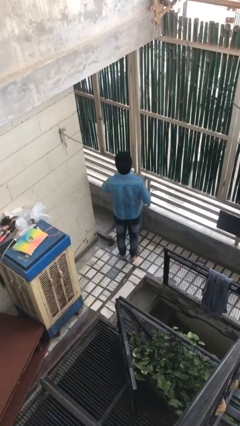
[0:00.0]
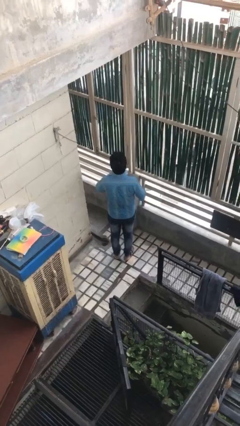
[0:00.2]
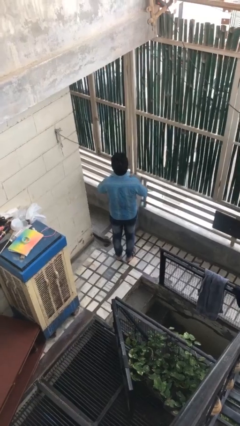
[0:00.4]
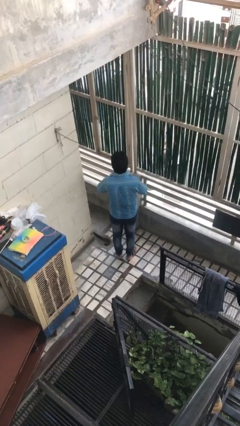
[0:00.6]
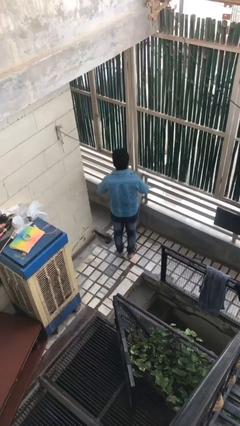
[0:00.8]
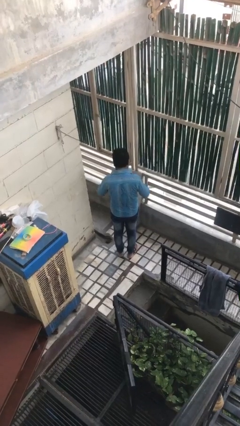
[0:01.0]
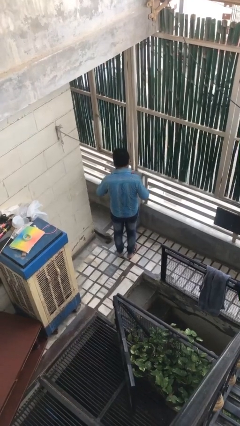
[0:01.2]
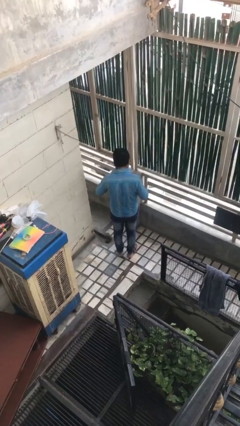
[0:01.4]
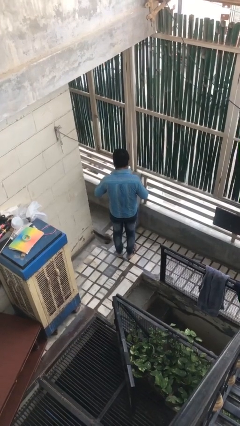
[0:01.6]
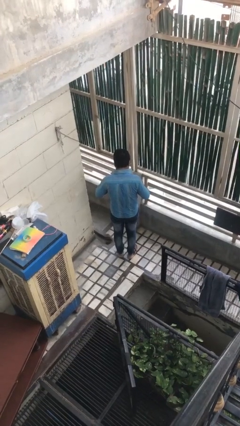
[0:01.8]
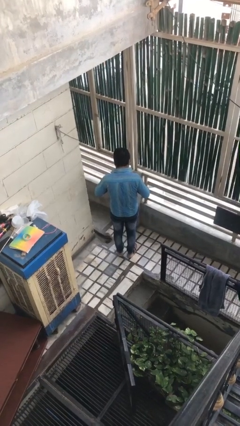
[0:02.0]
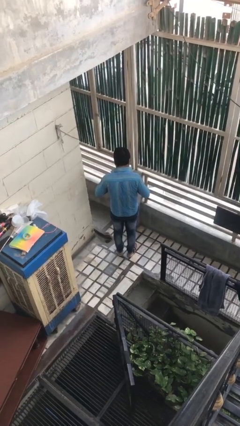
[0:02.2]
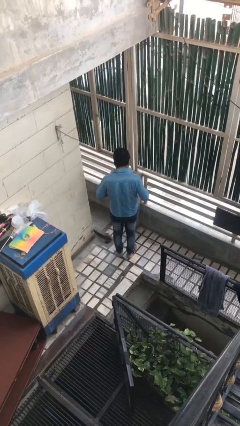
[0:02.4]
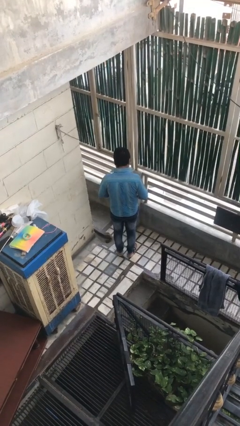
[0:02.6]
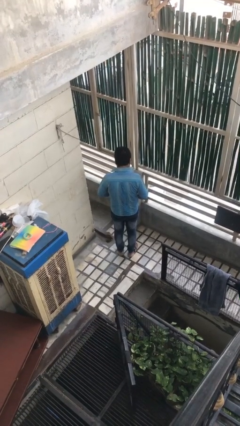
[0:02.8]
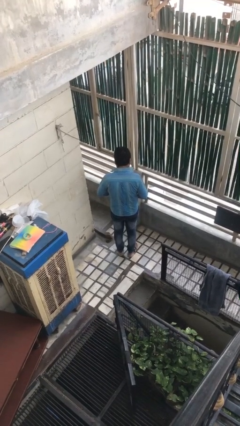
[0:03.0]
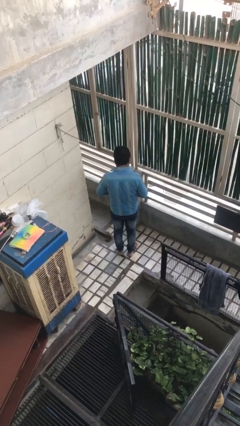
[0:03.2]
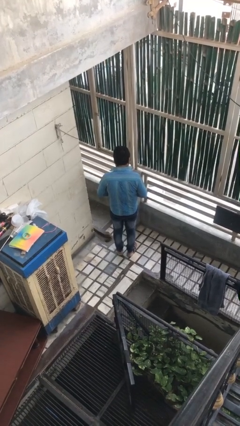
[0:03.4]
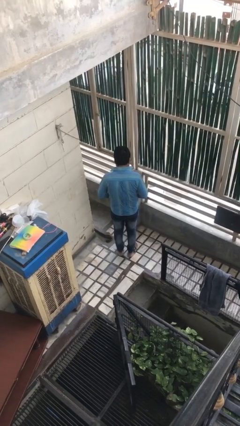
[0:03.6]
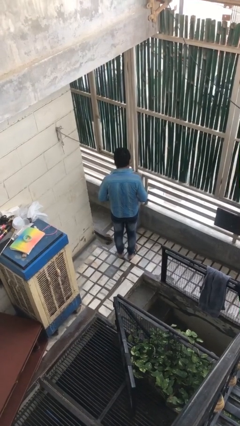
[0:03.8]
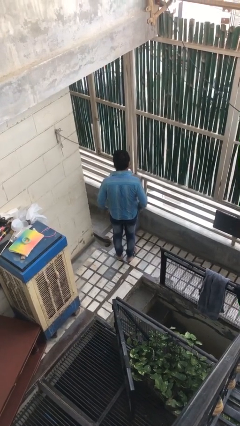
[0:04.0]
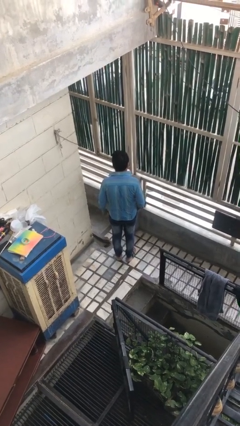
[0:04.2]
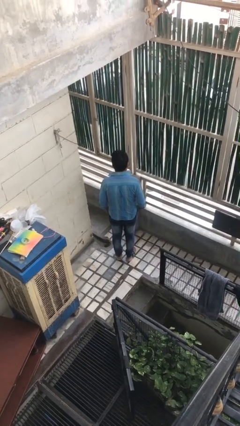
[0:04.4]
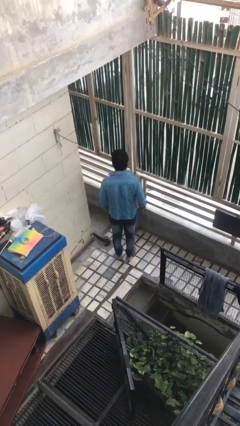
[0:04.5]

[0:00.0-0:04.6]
person unbuttons shirt

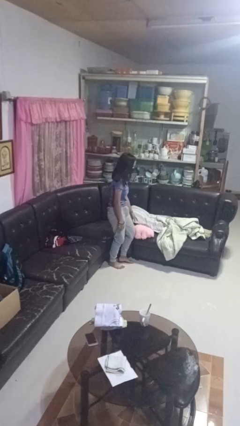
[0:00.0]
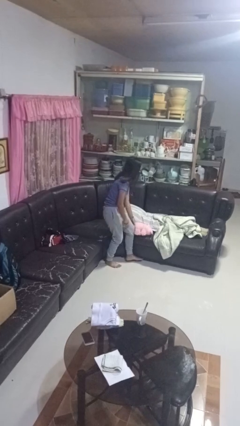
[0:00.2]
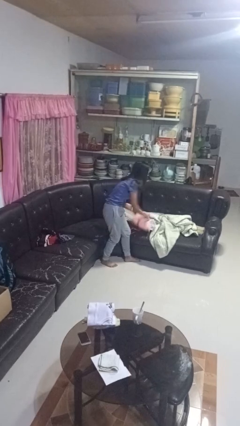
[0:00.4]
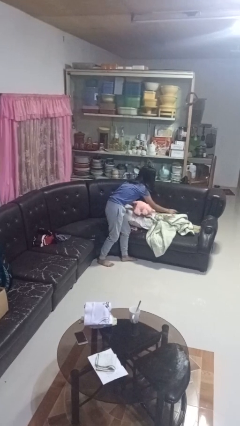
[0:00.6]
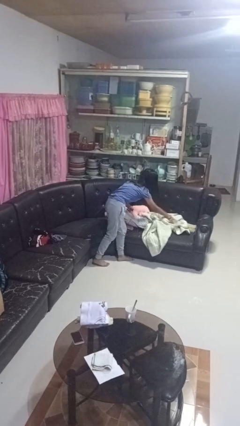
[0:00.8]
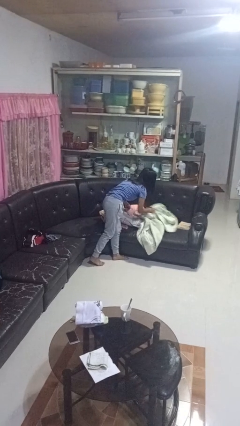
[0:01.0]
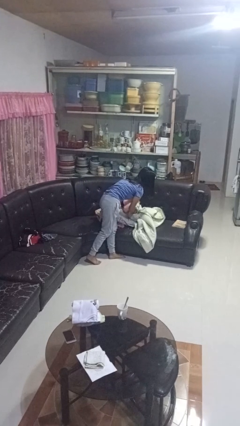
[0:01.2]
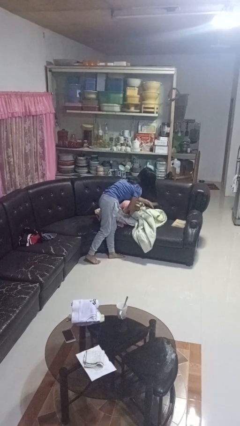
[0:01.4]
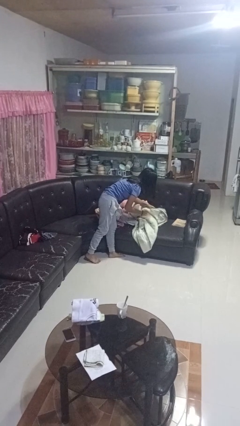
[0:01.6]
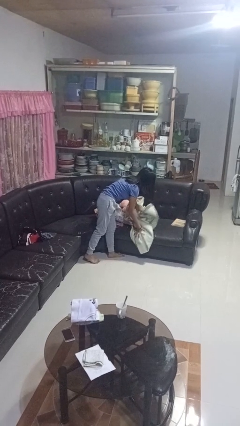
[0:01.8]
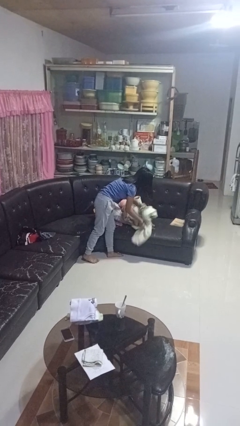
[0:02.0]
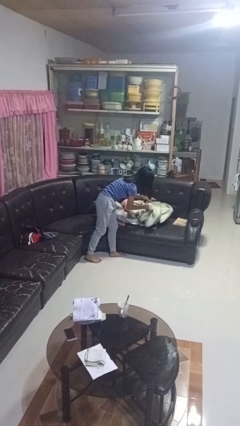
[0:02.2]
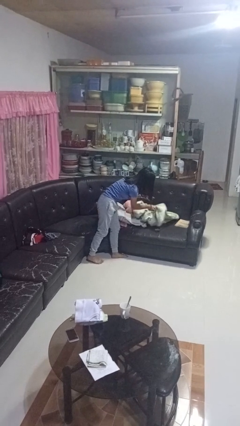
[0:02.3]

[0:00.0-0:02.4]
person searches in couch

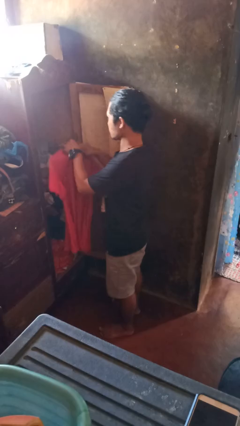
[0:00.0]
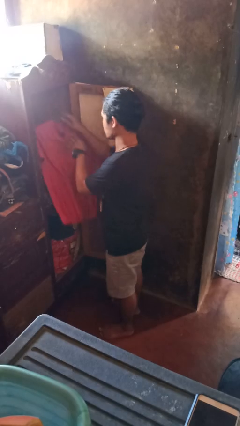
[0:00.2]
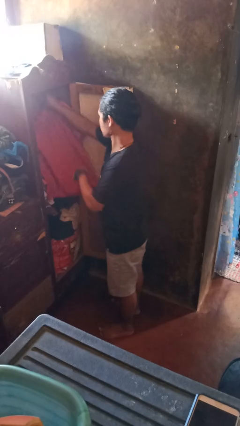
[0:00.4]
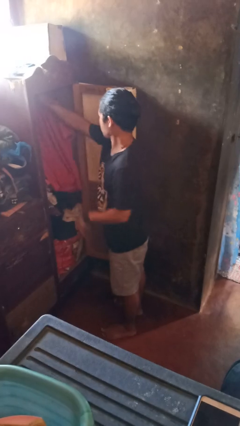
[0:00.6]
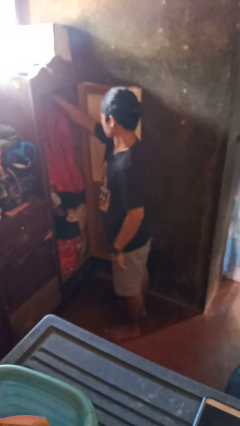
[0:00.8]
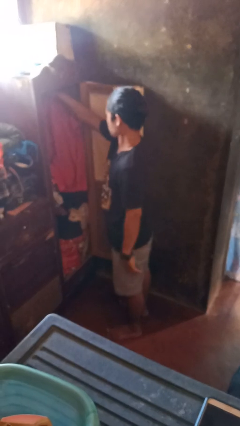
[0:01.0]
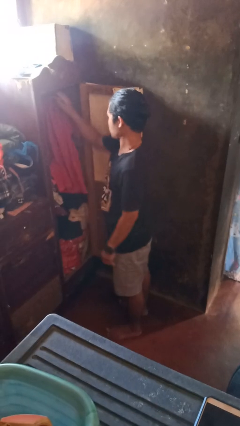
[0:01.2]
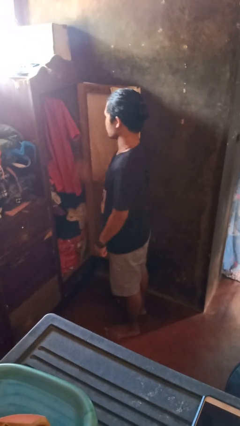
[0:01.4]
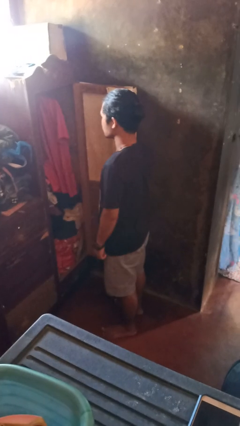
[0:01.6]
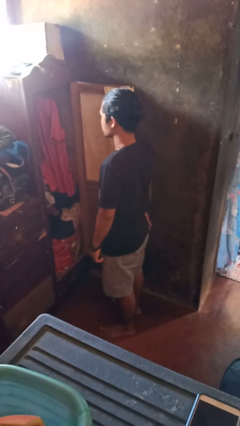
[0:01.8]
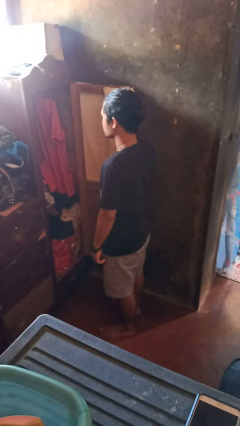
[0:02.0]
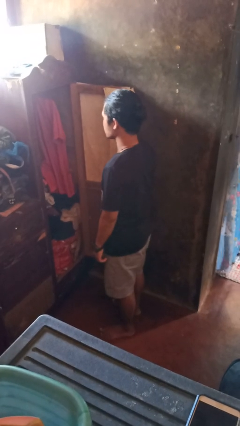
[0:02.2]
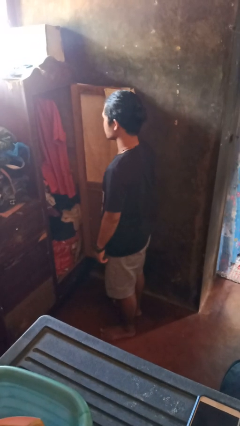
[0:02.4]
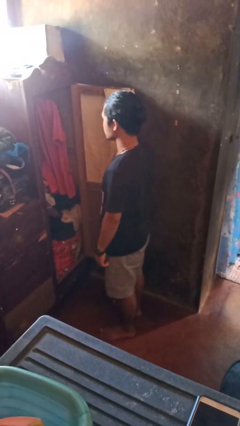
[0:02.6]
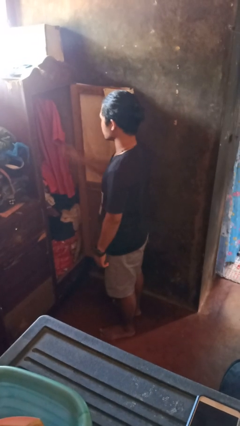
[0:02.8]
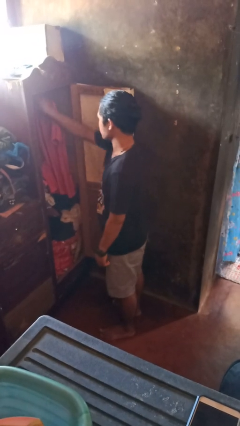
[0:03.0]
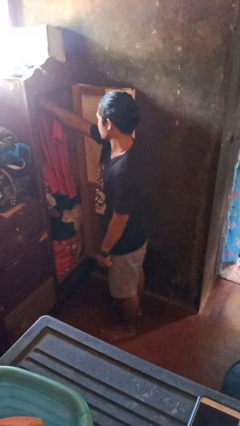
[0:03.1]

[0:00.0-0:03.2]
person puts clothes into closet

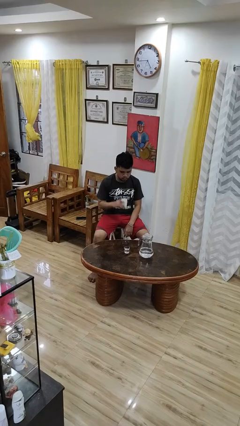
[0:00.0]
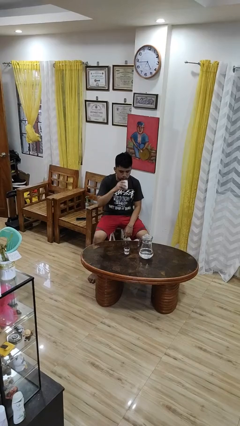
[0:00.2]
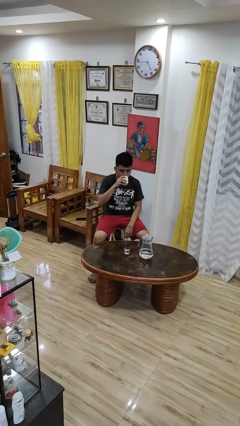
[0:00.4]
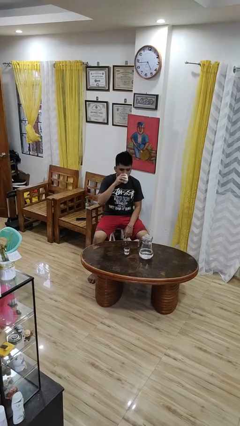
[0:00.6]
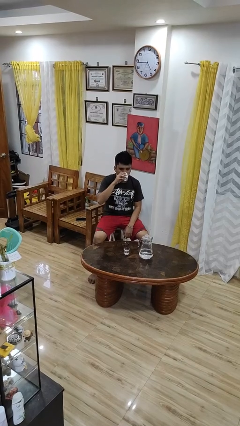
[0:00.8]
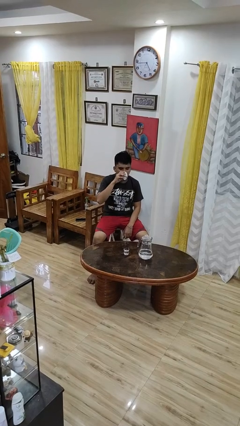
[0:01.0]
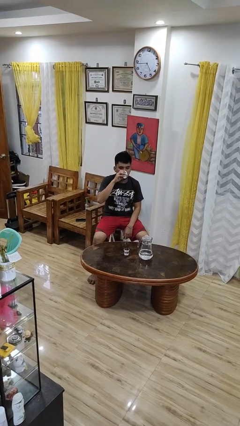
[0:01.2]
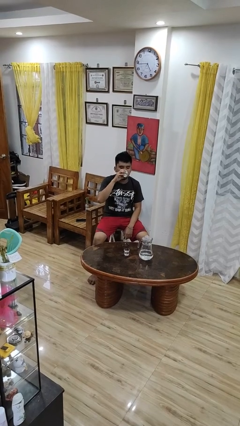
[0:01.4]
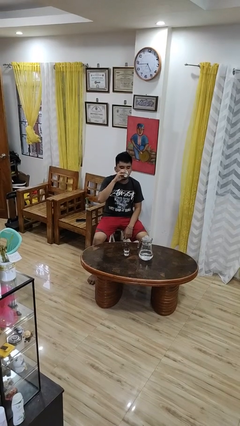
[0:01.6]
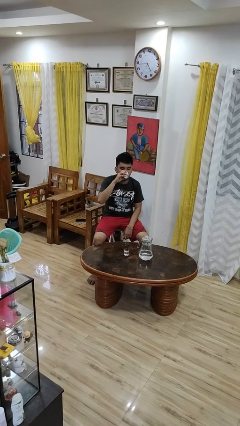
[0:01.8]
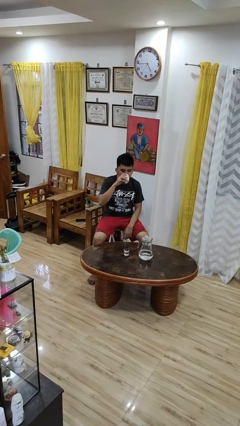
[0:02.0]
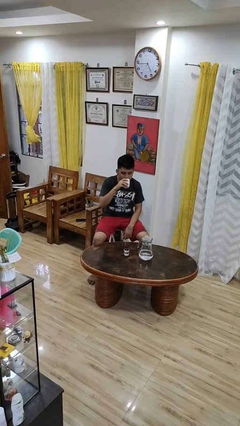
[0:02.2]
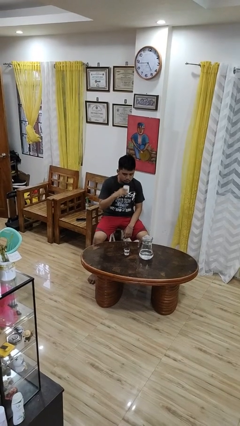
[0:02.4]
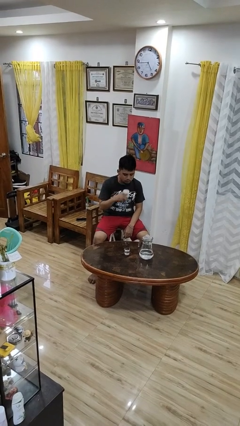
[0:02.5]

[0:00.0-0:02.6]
person drinks from shotglass

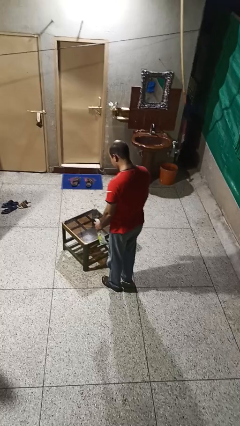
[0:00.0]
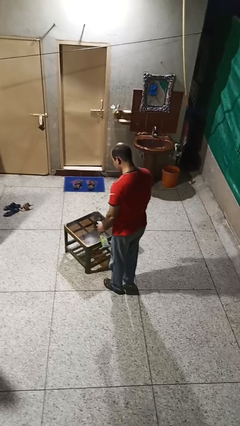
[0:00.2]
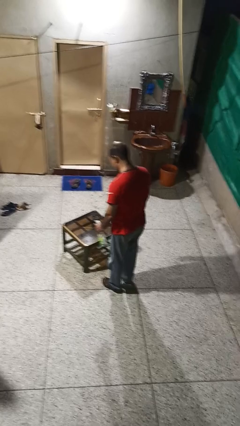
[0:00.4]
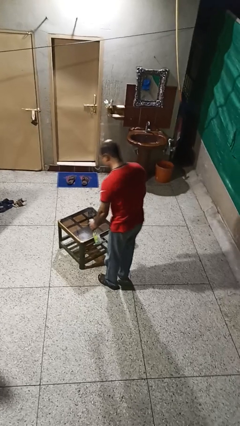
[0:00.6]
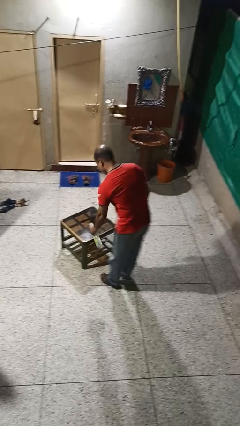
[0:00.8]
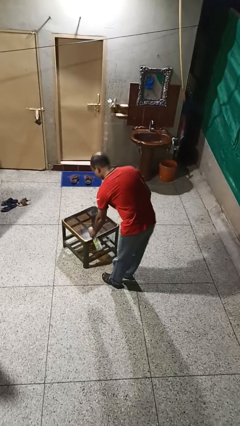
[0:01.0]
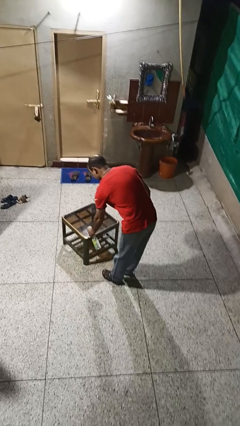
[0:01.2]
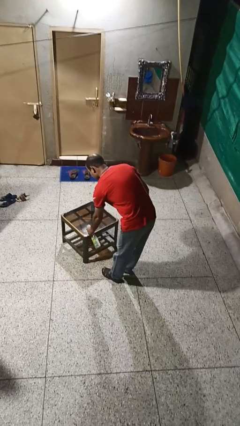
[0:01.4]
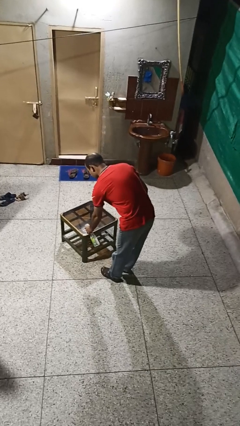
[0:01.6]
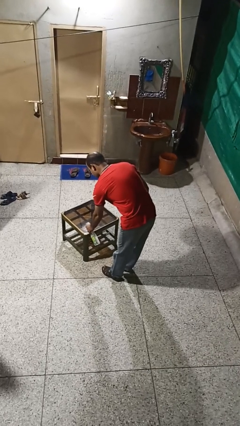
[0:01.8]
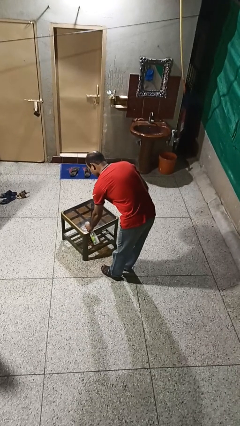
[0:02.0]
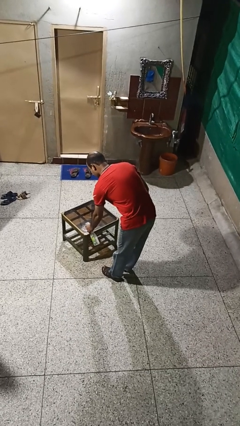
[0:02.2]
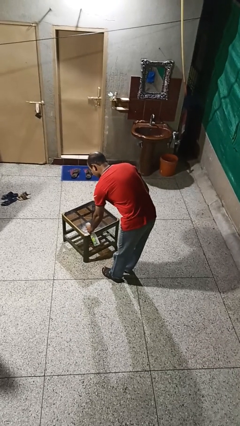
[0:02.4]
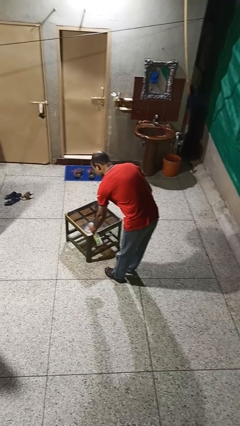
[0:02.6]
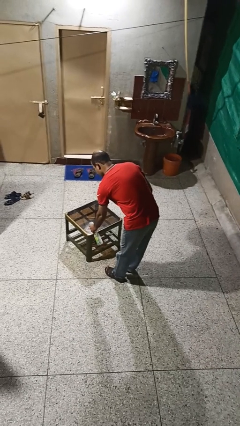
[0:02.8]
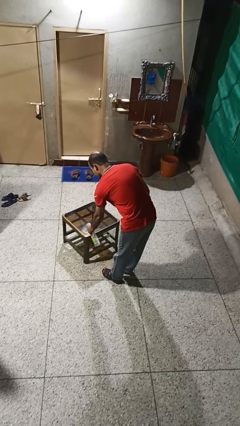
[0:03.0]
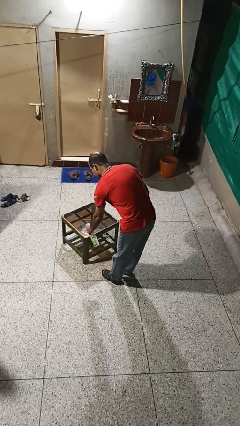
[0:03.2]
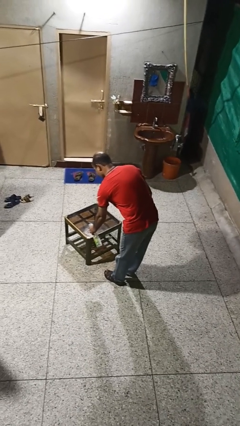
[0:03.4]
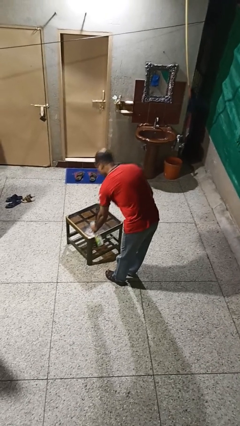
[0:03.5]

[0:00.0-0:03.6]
person sprays from bottle

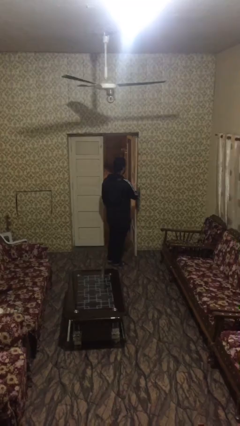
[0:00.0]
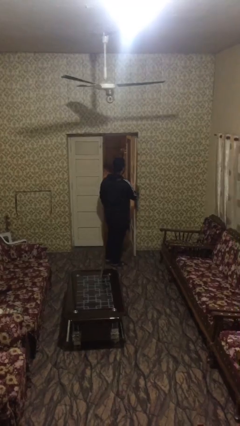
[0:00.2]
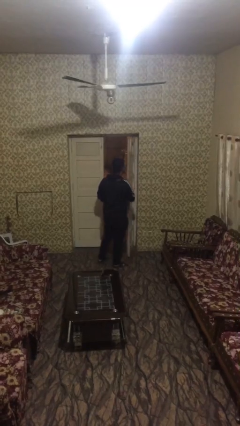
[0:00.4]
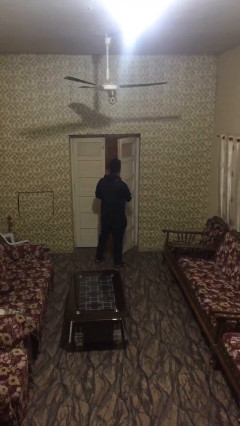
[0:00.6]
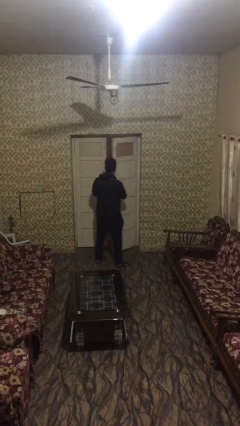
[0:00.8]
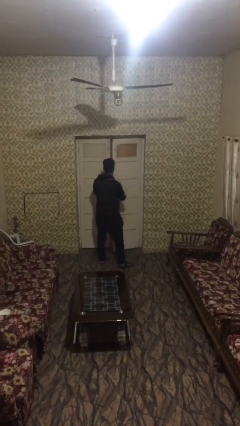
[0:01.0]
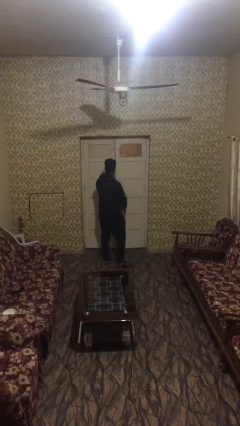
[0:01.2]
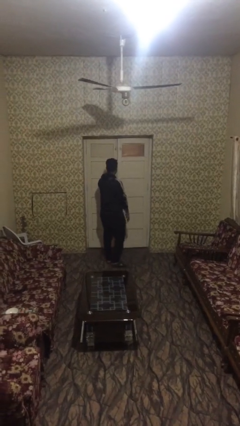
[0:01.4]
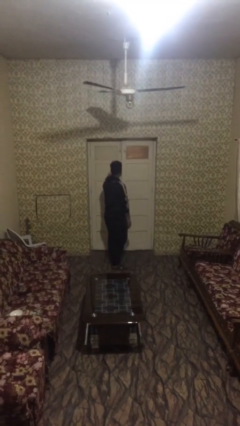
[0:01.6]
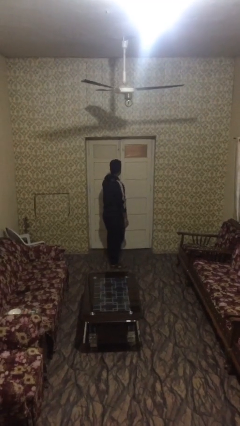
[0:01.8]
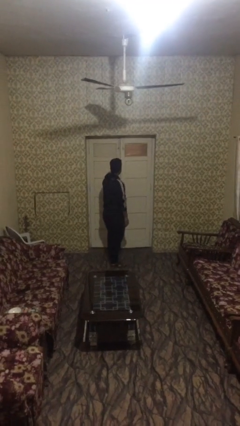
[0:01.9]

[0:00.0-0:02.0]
person closes facility door
